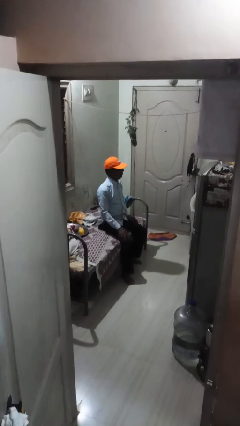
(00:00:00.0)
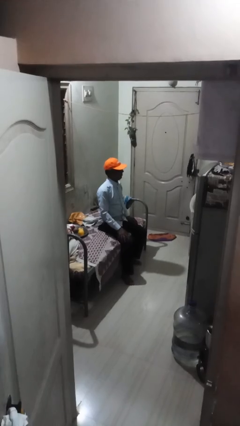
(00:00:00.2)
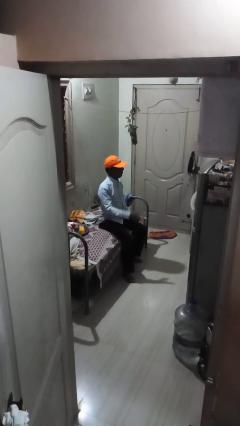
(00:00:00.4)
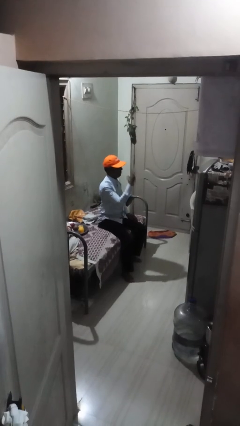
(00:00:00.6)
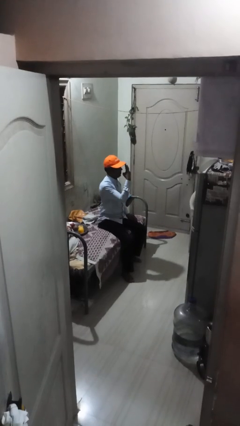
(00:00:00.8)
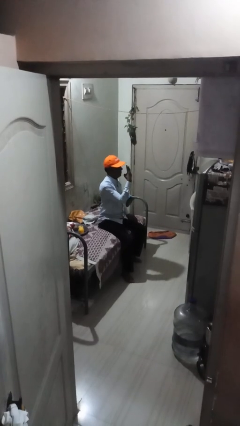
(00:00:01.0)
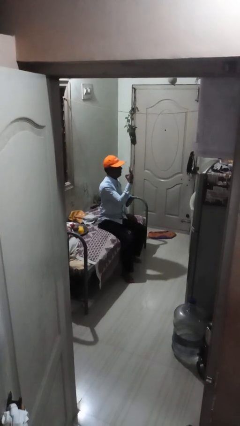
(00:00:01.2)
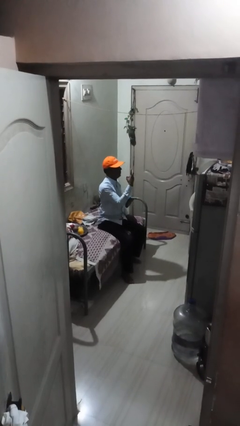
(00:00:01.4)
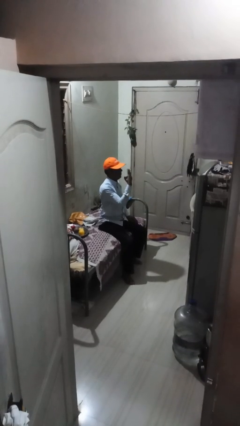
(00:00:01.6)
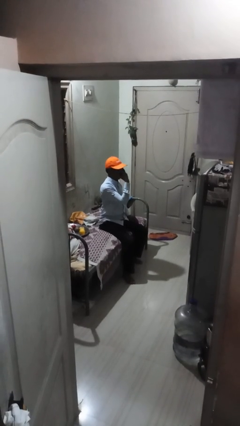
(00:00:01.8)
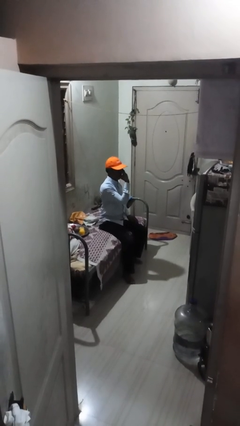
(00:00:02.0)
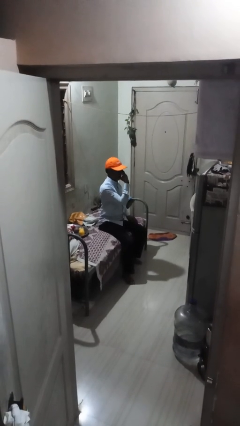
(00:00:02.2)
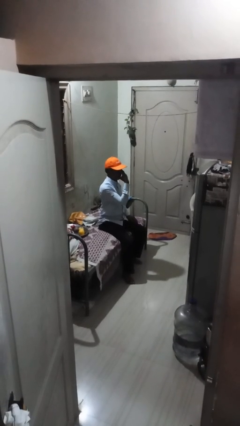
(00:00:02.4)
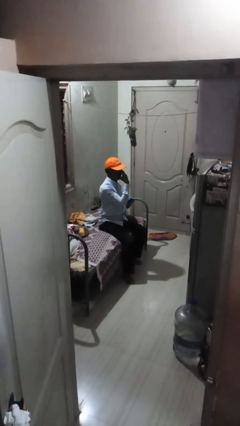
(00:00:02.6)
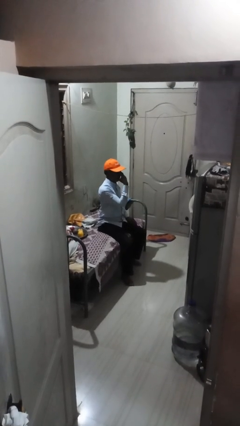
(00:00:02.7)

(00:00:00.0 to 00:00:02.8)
person gestures watch closely

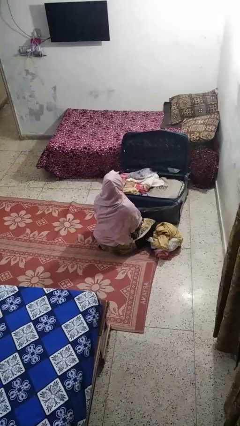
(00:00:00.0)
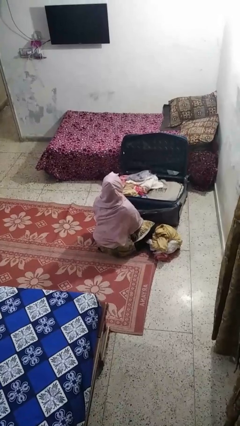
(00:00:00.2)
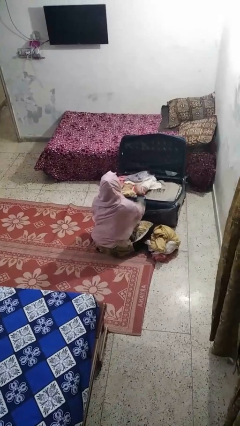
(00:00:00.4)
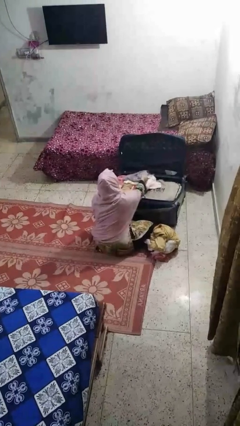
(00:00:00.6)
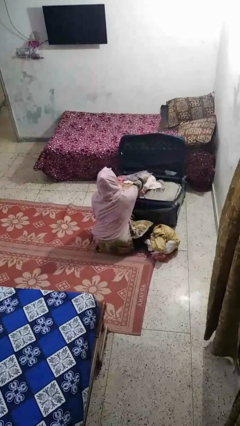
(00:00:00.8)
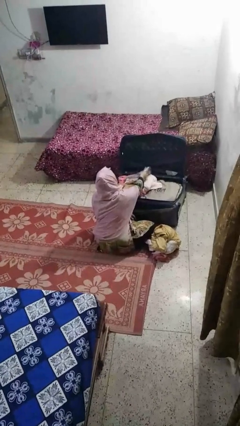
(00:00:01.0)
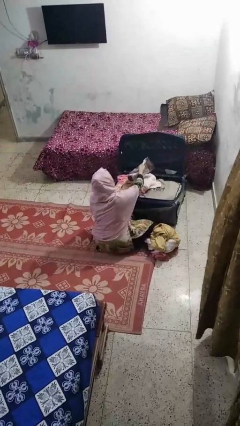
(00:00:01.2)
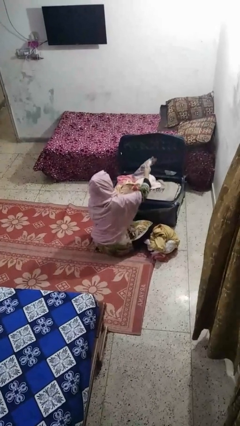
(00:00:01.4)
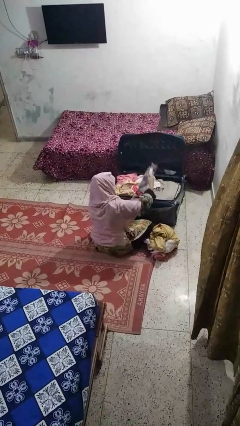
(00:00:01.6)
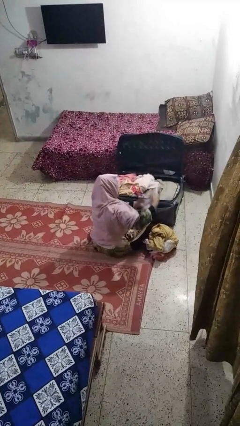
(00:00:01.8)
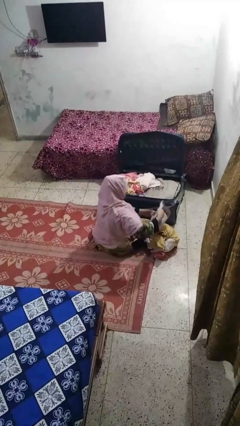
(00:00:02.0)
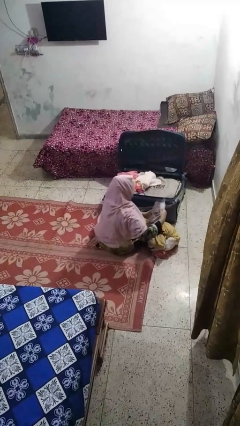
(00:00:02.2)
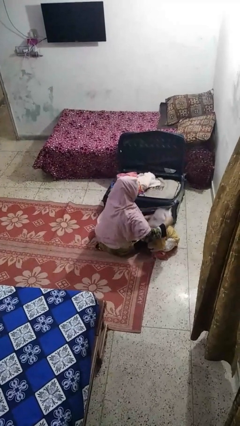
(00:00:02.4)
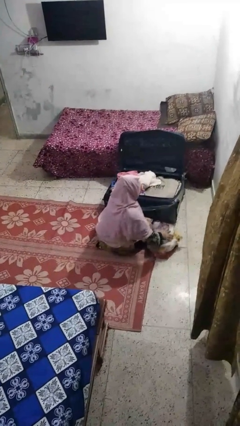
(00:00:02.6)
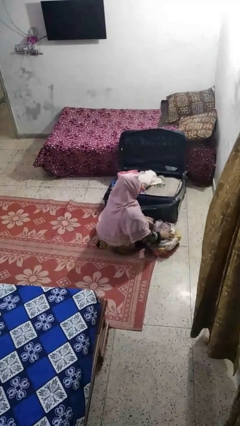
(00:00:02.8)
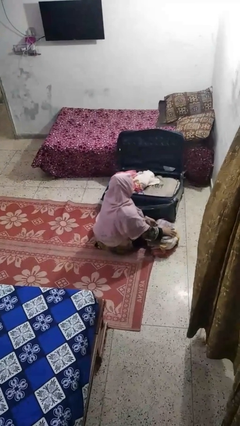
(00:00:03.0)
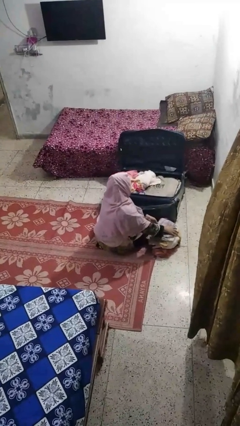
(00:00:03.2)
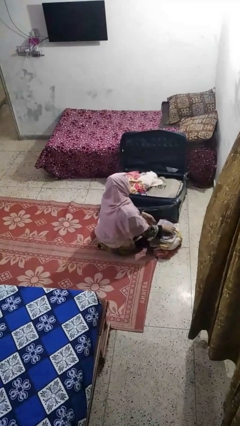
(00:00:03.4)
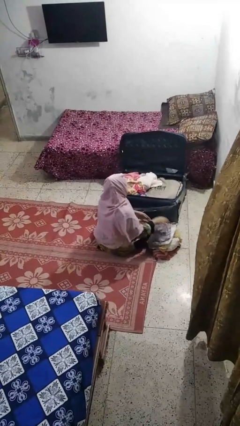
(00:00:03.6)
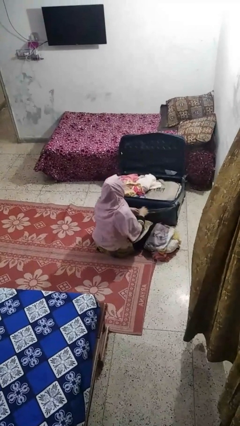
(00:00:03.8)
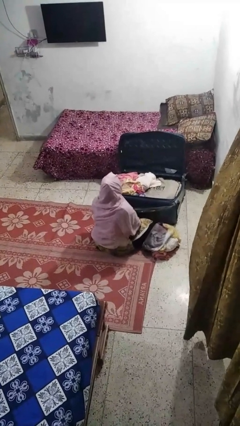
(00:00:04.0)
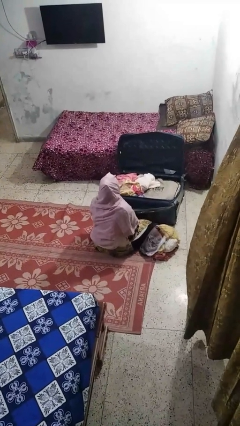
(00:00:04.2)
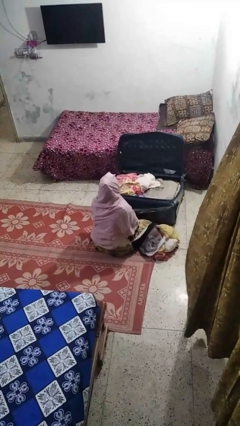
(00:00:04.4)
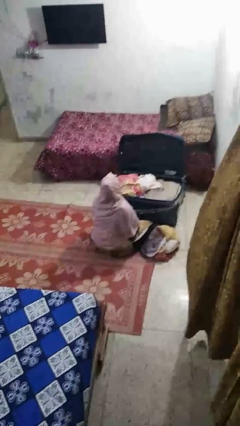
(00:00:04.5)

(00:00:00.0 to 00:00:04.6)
person unloads clothes from suitcase

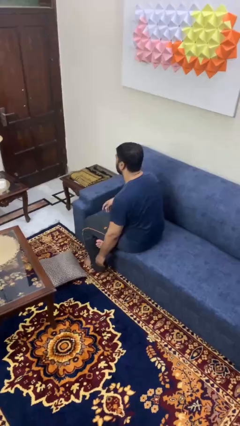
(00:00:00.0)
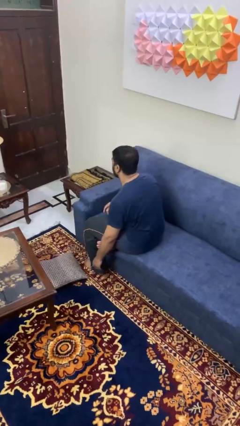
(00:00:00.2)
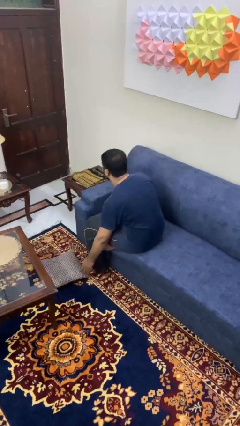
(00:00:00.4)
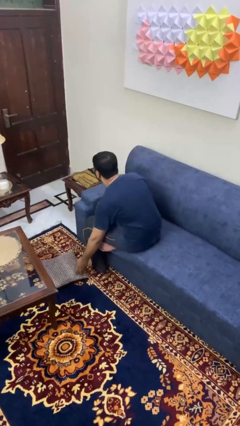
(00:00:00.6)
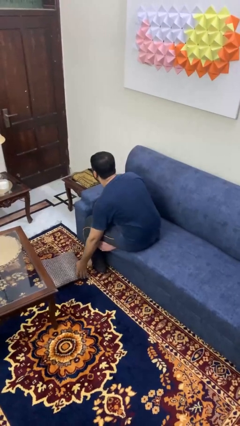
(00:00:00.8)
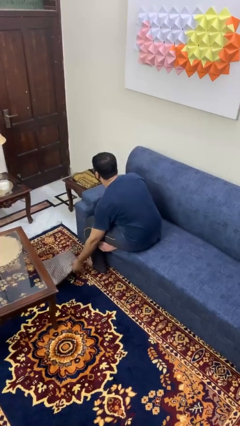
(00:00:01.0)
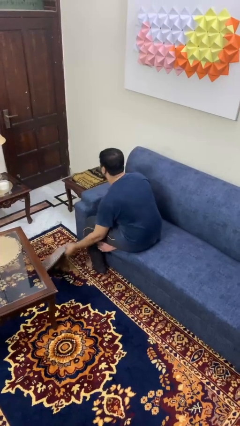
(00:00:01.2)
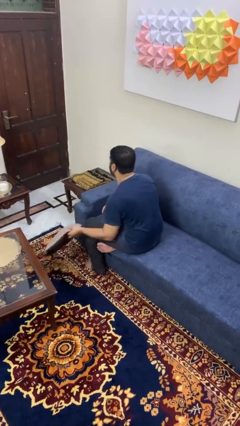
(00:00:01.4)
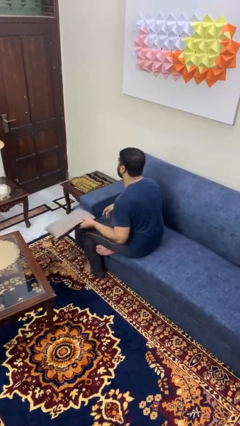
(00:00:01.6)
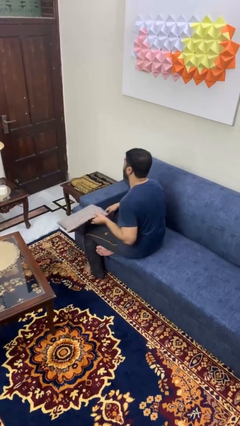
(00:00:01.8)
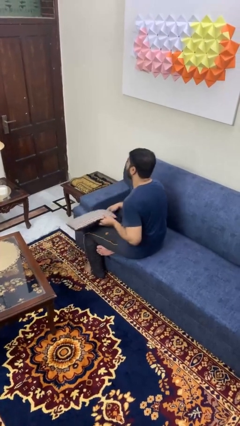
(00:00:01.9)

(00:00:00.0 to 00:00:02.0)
person picks up object from floor

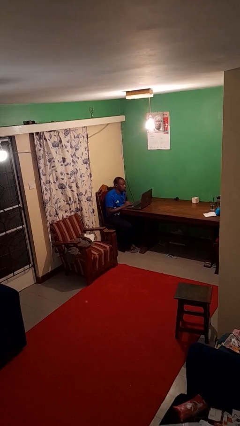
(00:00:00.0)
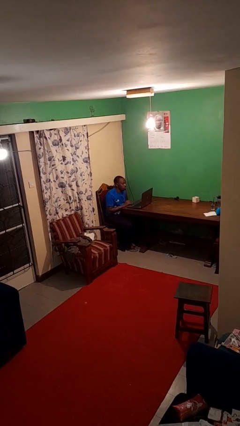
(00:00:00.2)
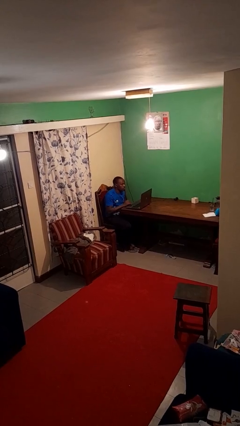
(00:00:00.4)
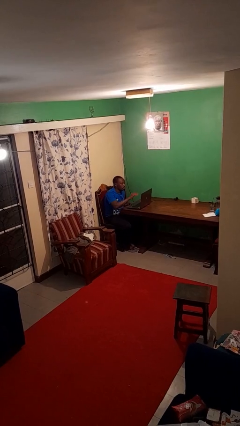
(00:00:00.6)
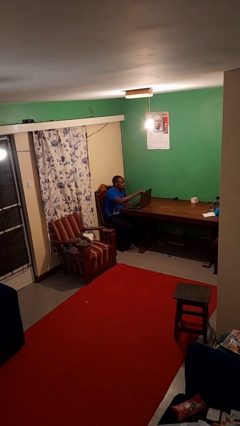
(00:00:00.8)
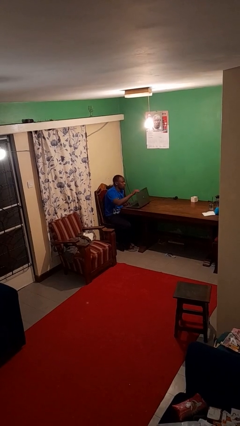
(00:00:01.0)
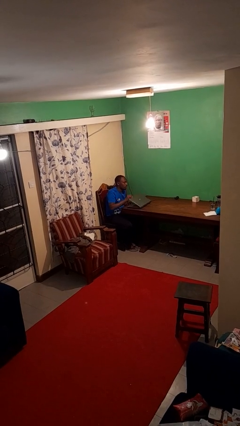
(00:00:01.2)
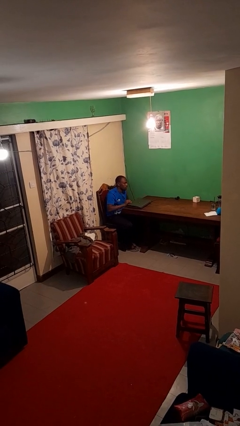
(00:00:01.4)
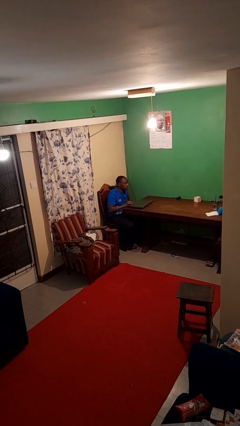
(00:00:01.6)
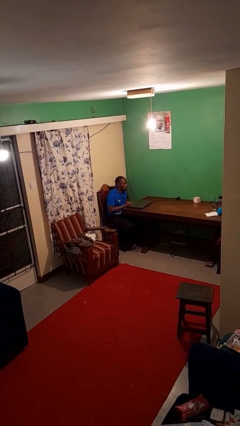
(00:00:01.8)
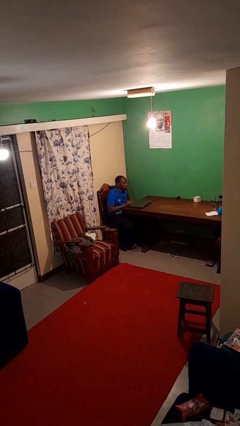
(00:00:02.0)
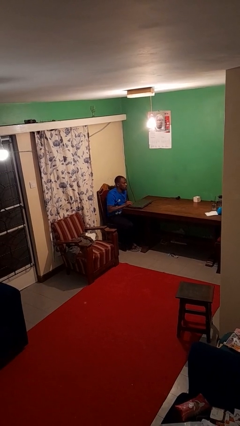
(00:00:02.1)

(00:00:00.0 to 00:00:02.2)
person closes laptop

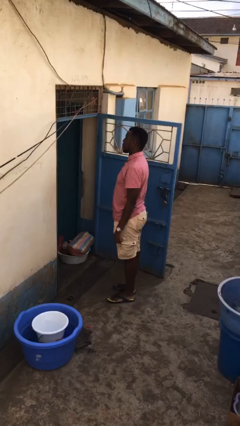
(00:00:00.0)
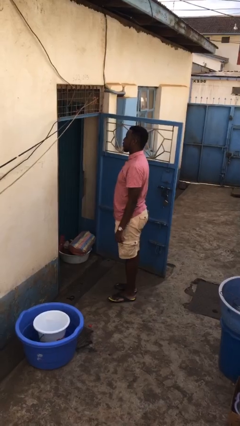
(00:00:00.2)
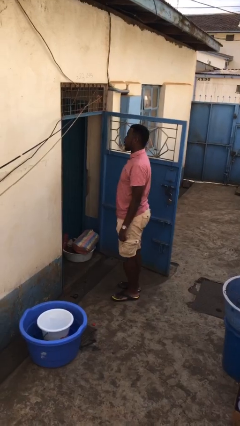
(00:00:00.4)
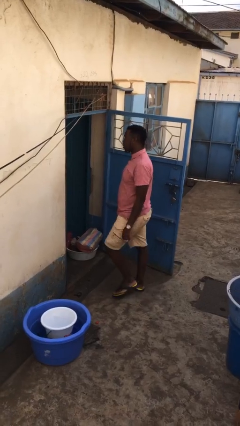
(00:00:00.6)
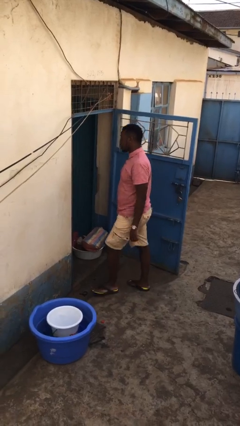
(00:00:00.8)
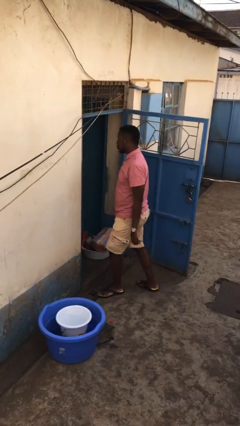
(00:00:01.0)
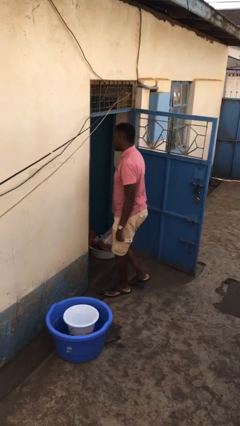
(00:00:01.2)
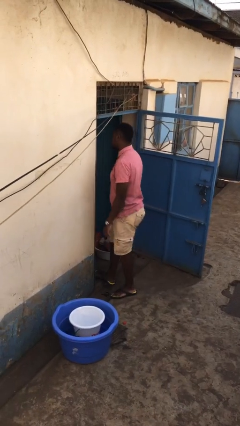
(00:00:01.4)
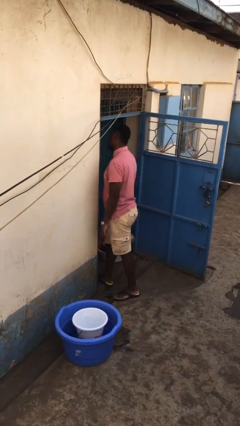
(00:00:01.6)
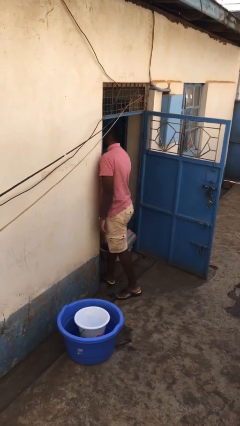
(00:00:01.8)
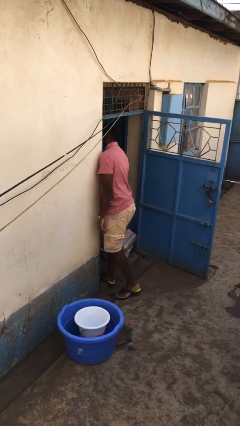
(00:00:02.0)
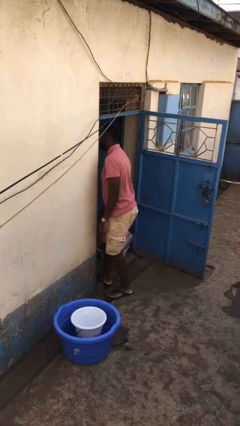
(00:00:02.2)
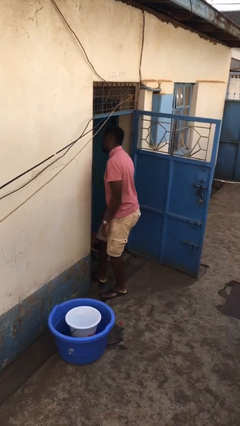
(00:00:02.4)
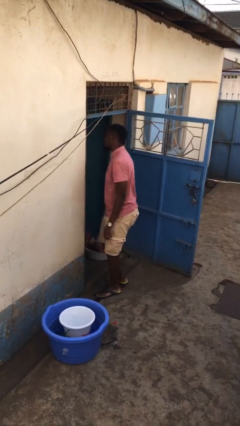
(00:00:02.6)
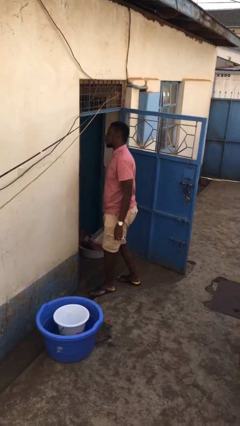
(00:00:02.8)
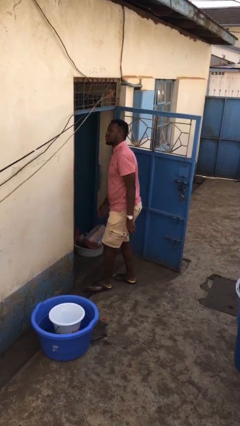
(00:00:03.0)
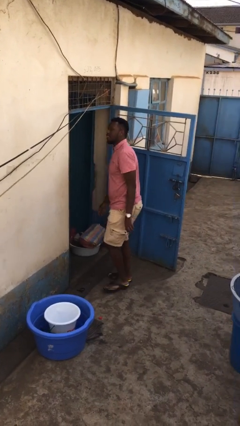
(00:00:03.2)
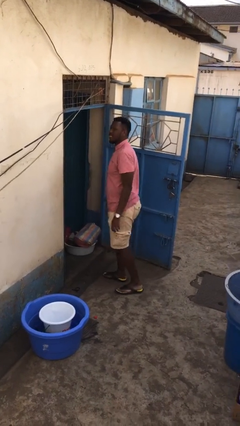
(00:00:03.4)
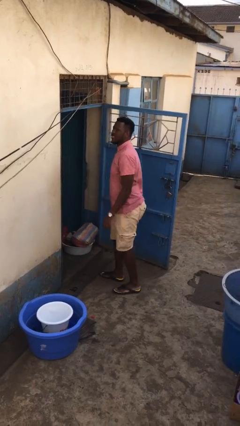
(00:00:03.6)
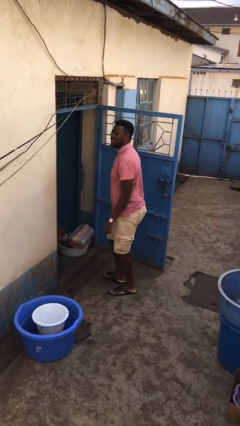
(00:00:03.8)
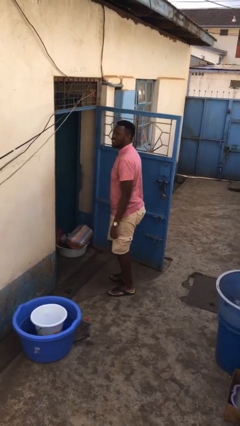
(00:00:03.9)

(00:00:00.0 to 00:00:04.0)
person bumps into wall

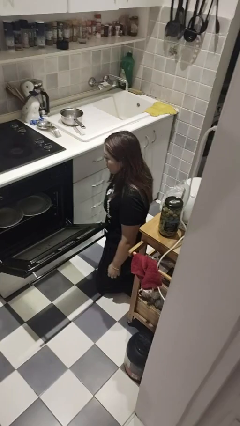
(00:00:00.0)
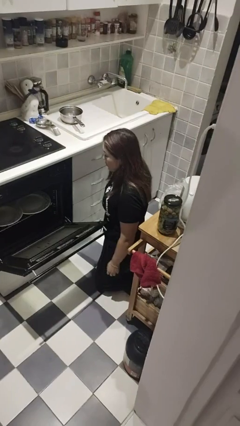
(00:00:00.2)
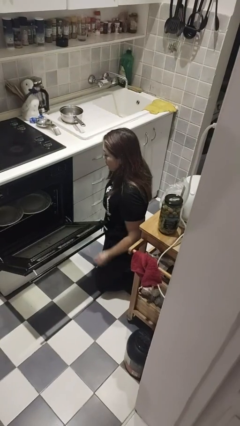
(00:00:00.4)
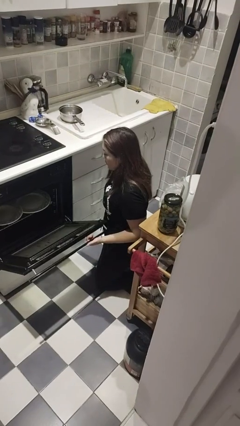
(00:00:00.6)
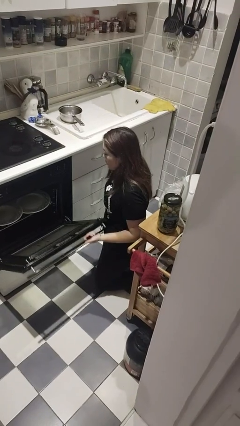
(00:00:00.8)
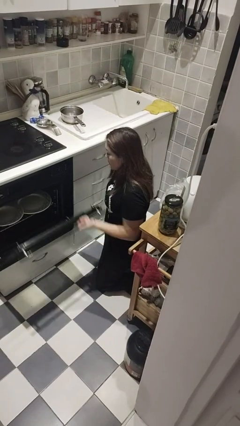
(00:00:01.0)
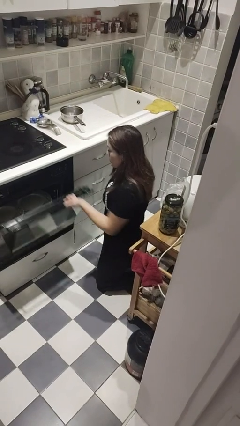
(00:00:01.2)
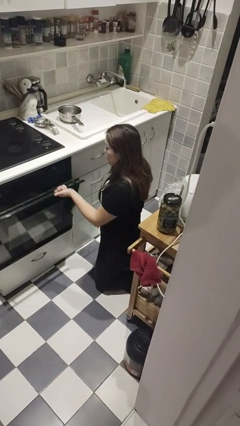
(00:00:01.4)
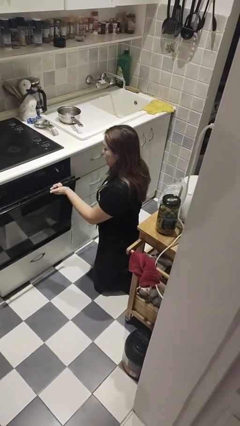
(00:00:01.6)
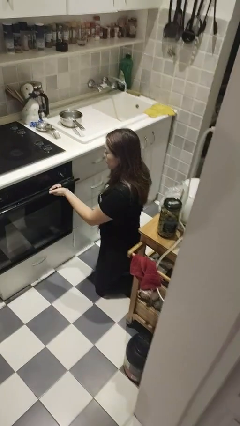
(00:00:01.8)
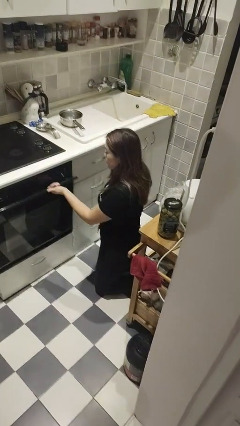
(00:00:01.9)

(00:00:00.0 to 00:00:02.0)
person closes dishwasher
